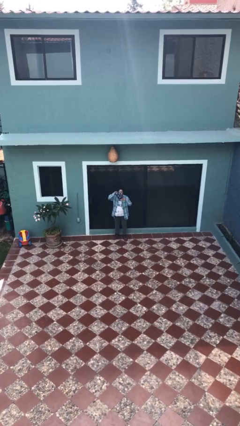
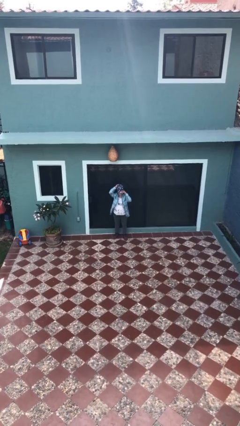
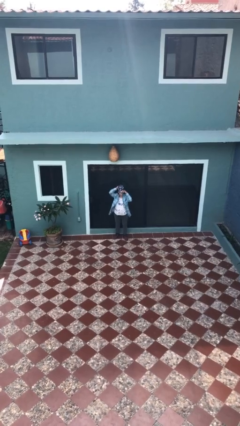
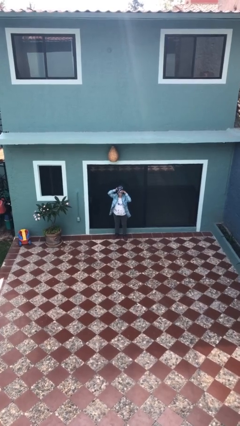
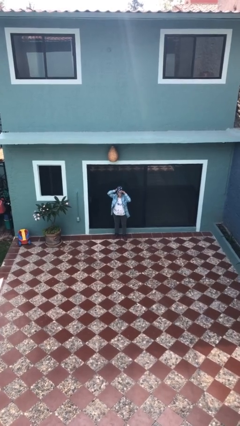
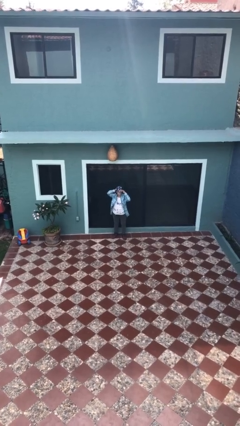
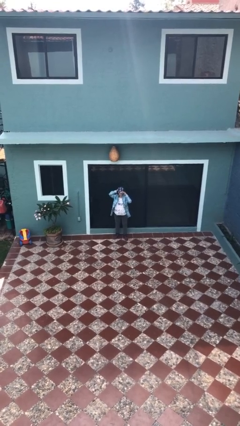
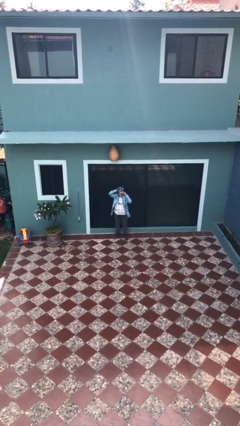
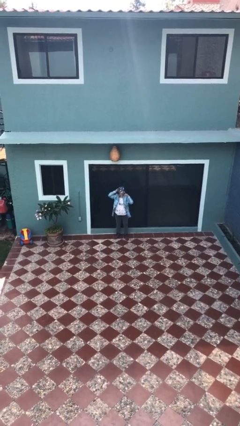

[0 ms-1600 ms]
person puts on hat

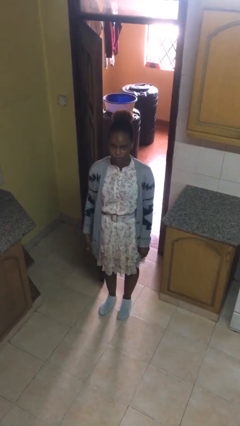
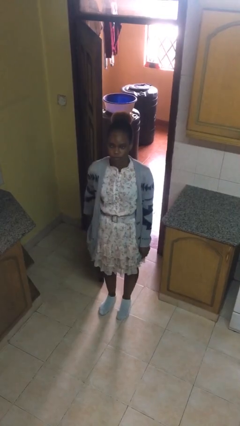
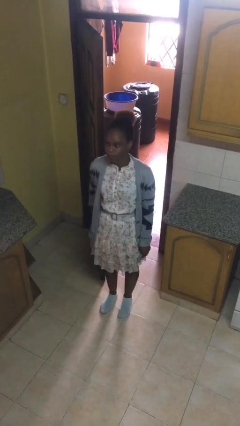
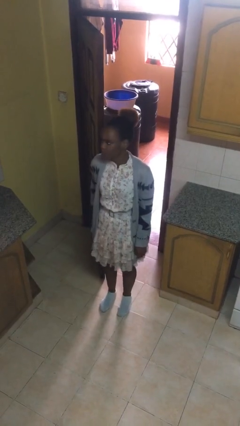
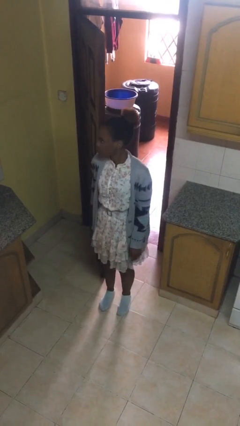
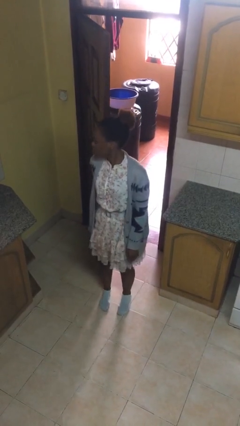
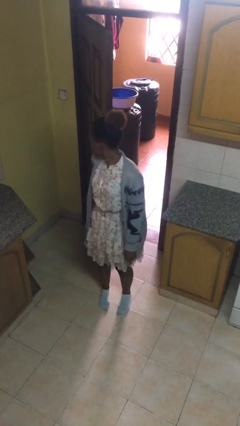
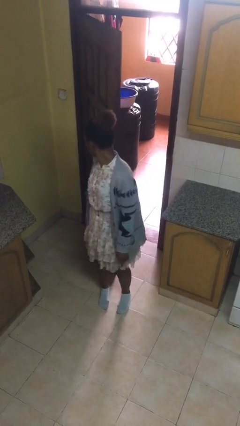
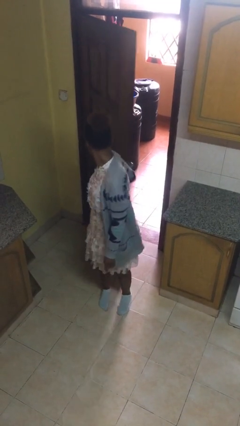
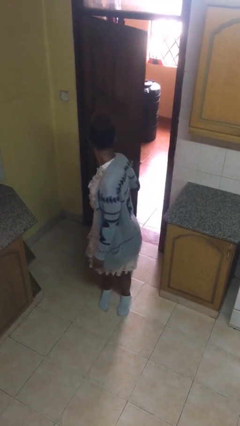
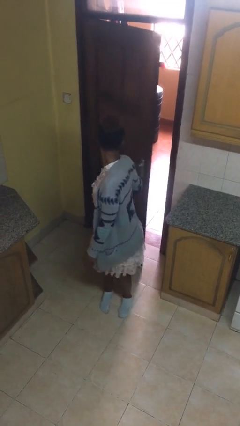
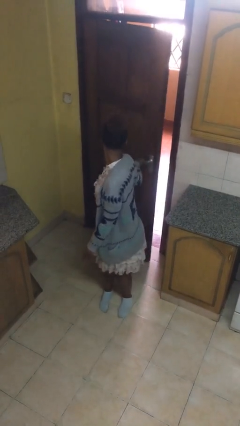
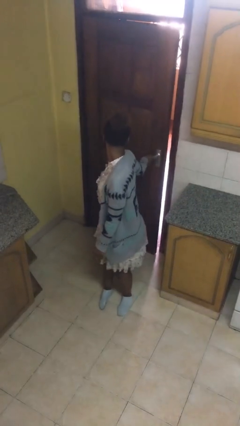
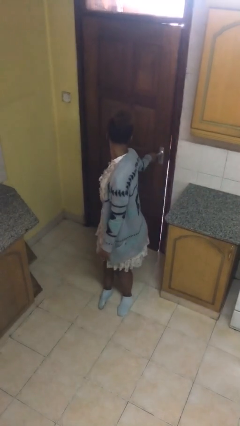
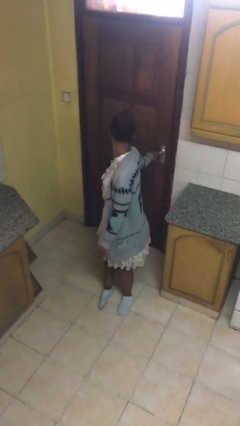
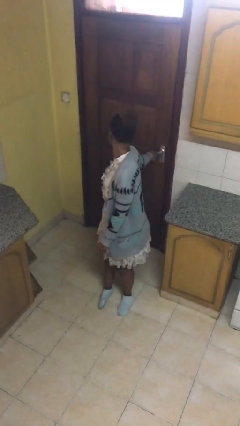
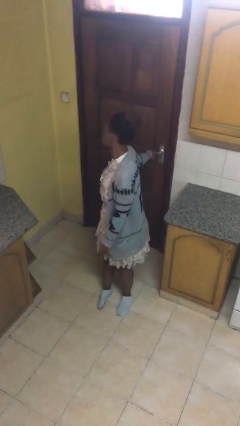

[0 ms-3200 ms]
person closes facility door

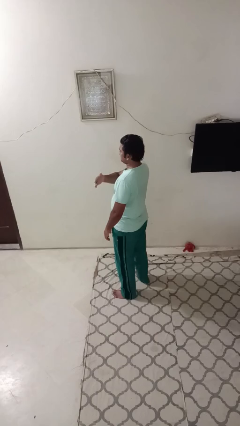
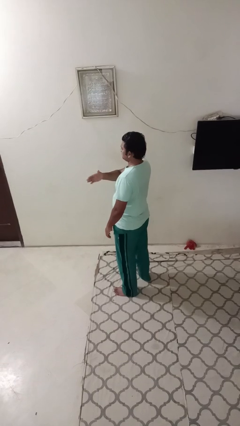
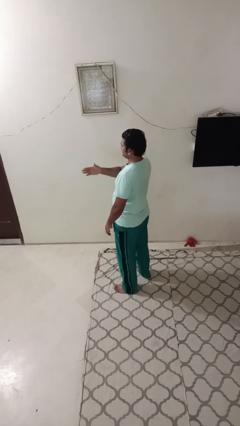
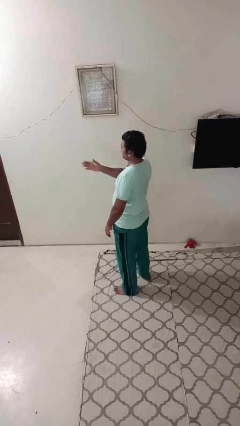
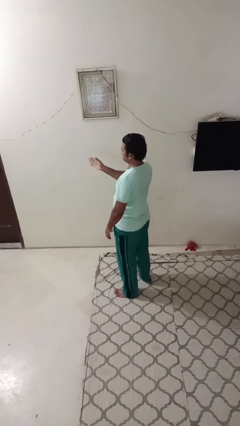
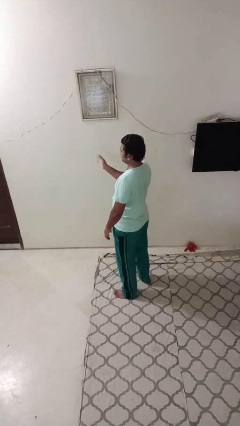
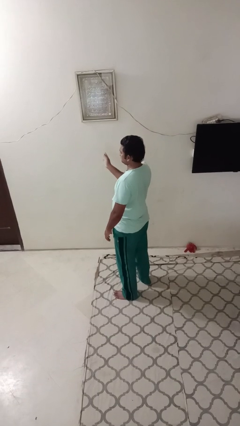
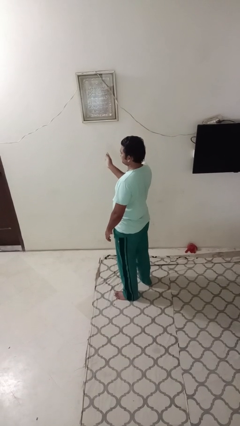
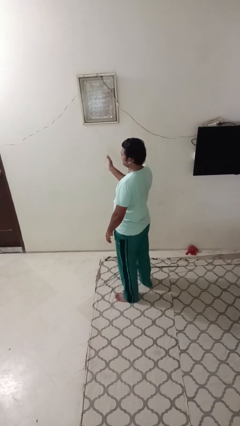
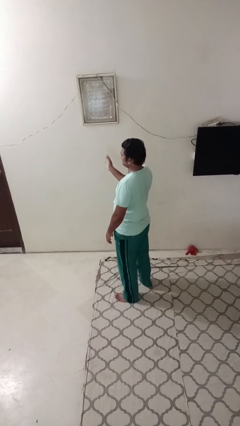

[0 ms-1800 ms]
person gestures swipe right

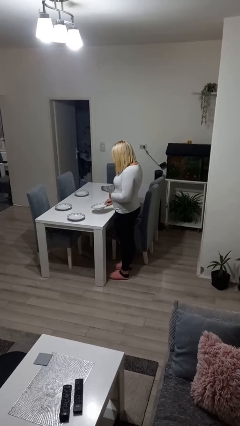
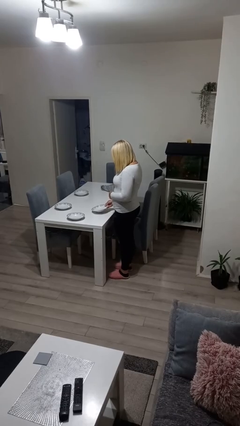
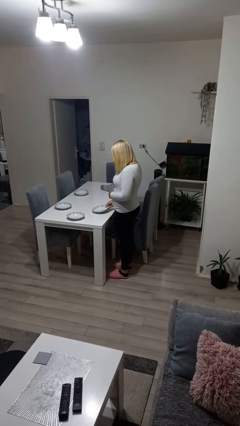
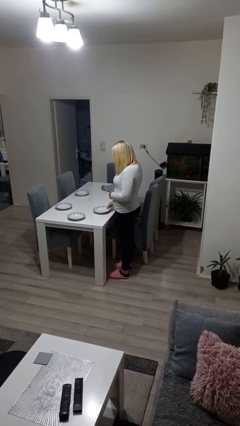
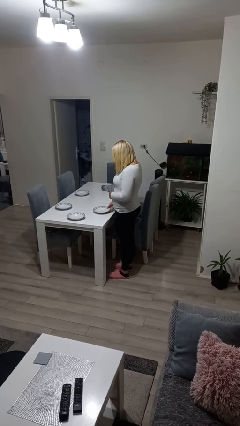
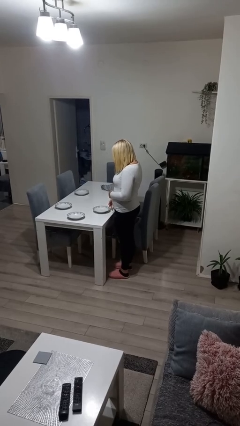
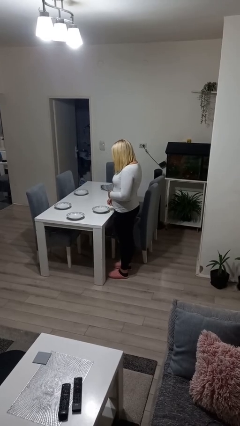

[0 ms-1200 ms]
person sets table

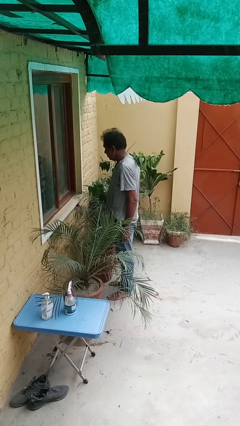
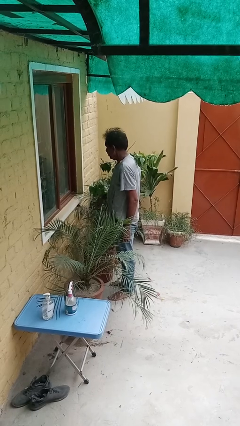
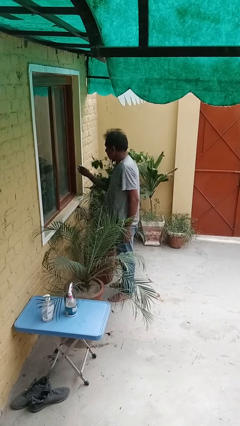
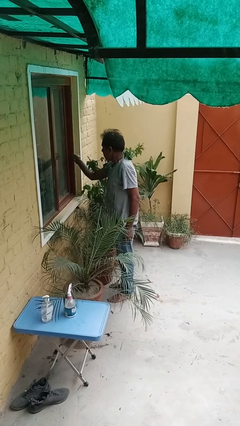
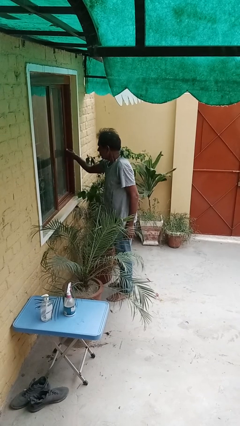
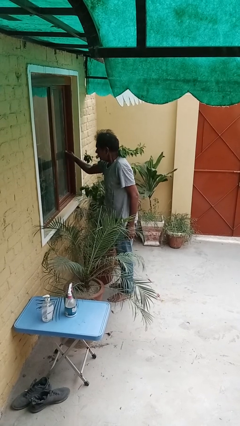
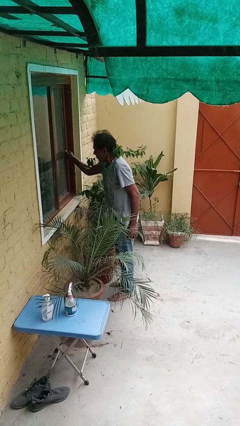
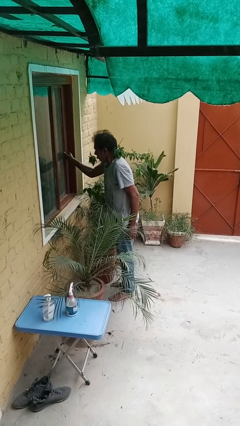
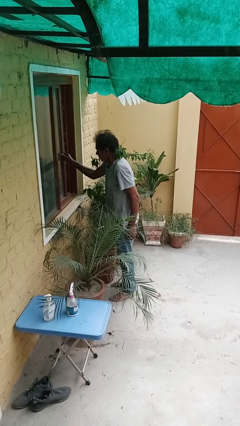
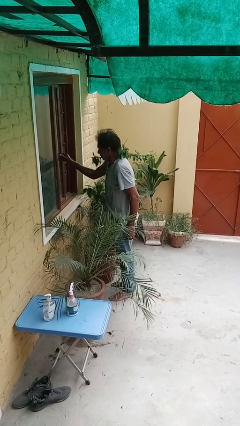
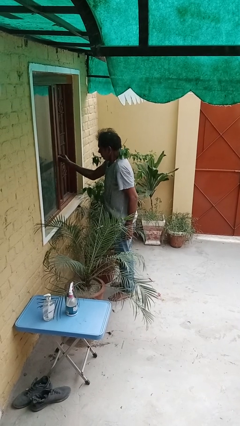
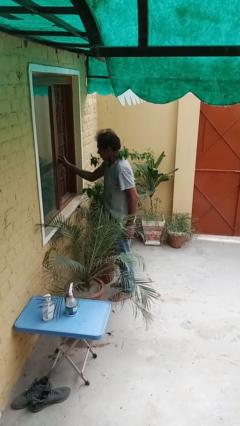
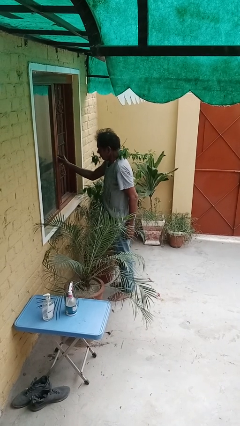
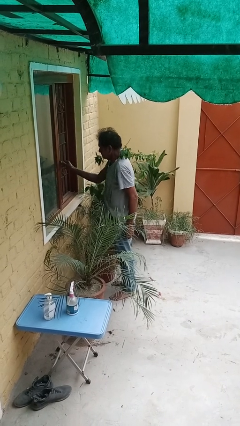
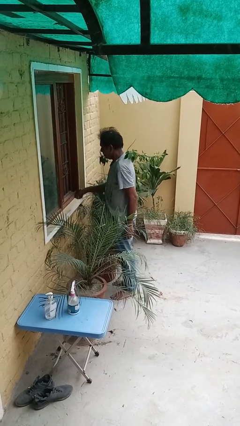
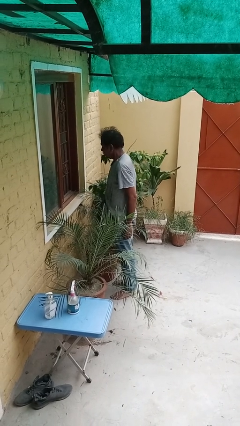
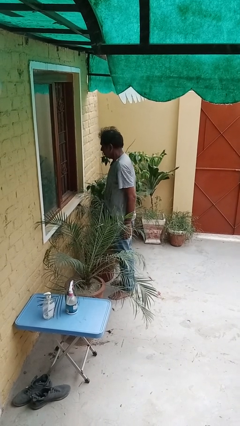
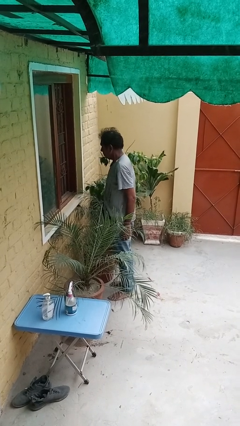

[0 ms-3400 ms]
person opens home window

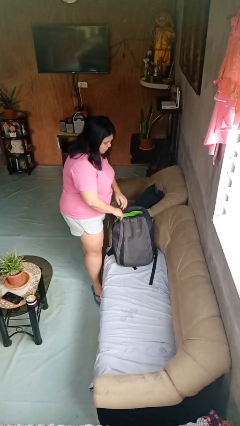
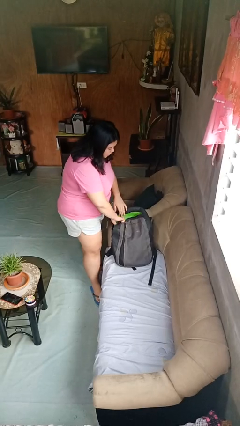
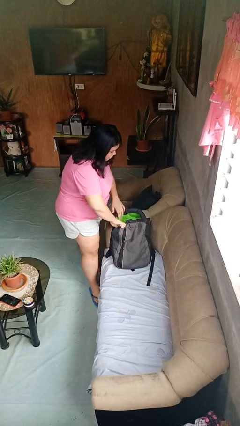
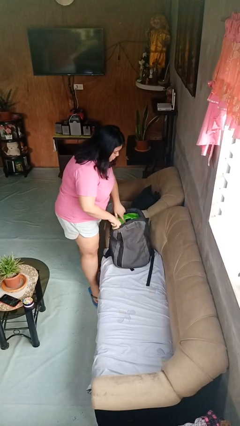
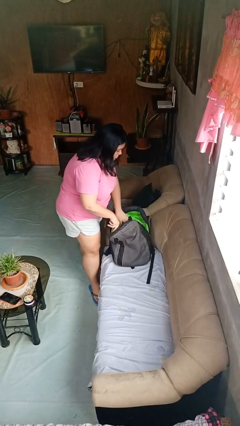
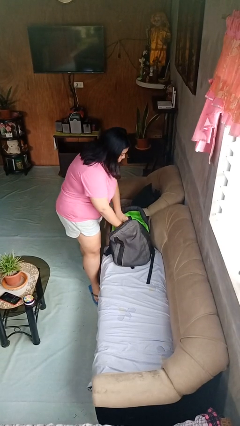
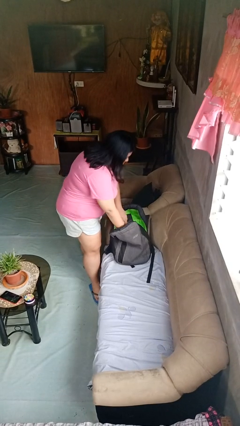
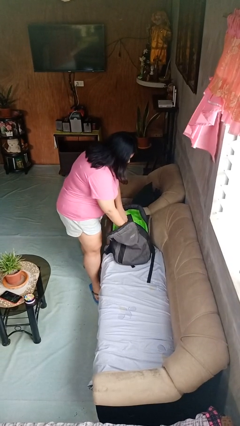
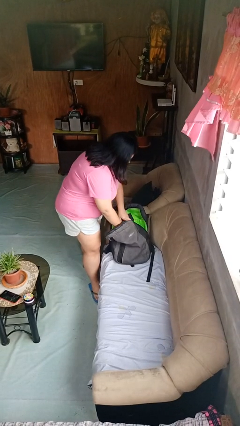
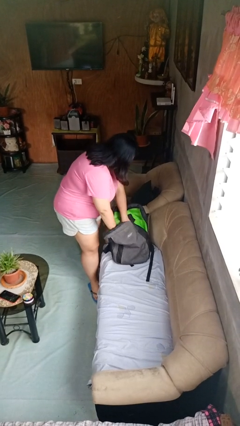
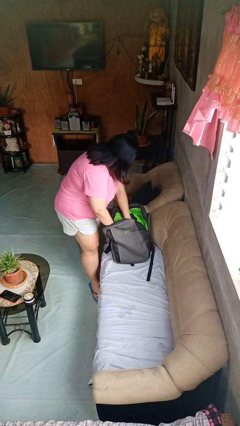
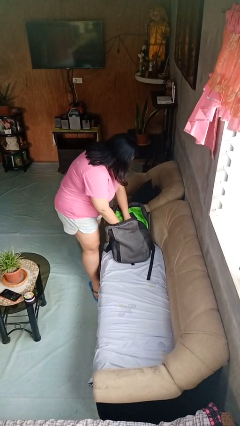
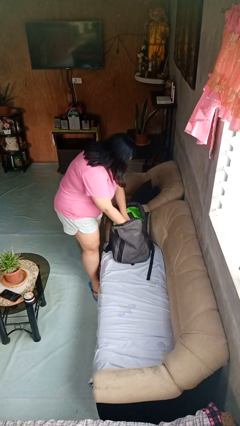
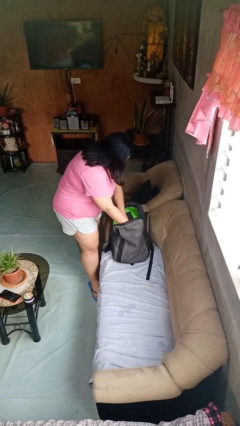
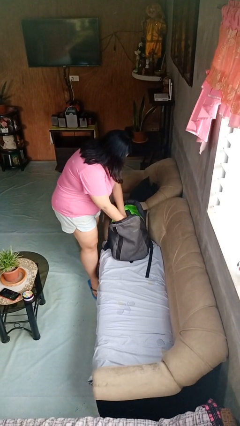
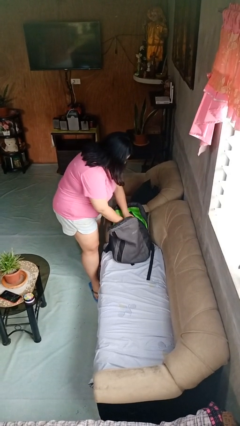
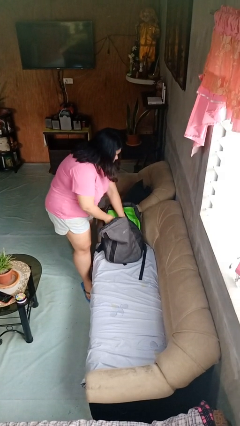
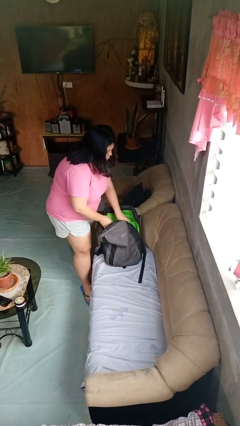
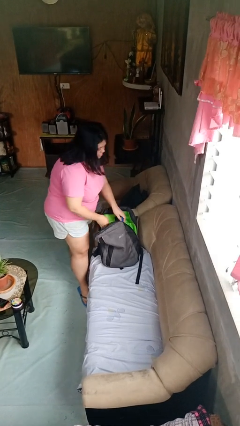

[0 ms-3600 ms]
person searches in backpack

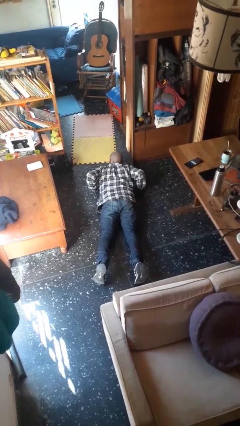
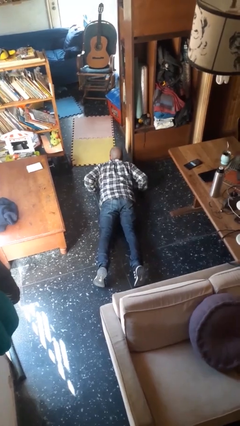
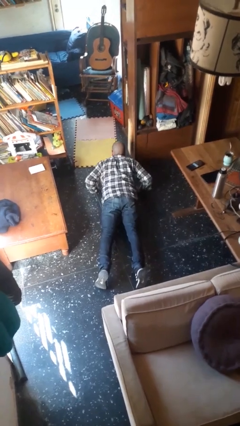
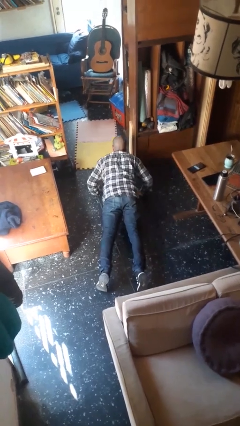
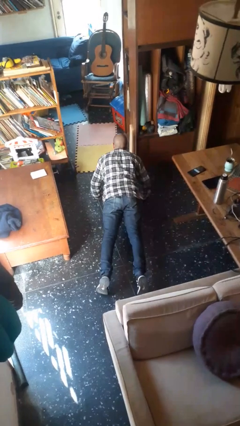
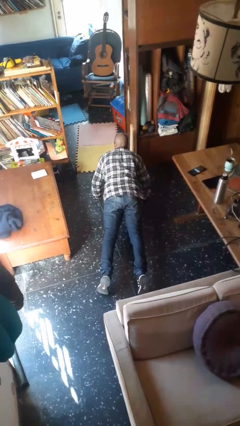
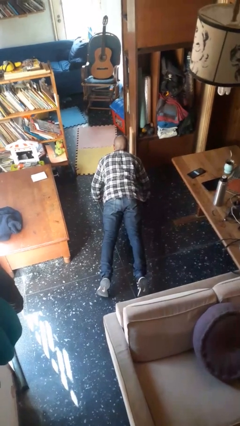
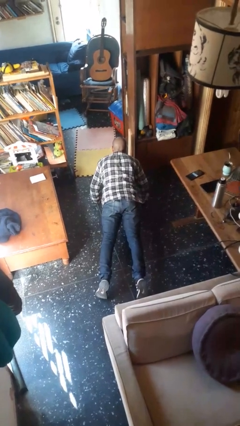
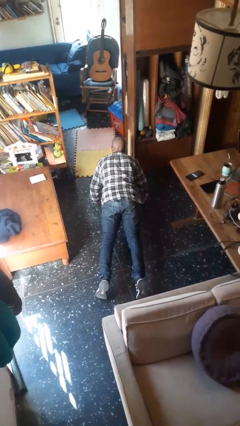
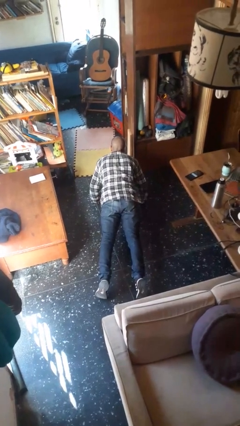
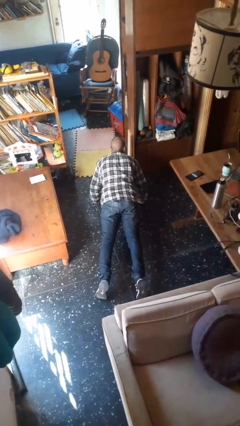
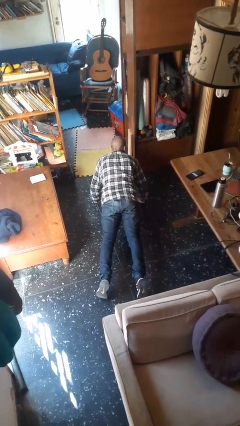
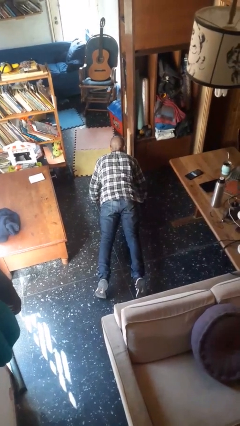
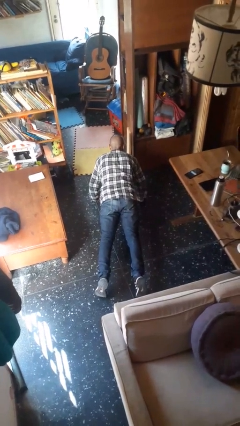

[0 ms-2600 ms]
person exercises with pushup
